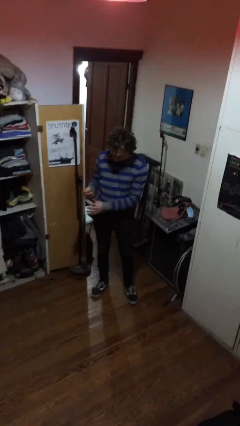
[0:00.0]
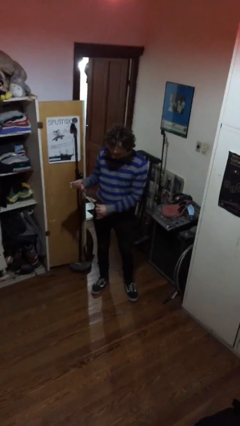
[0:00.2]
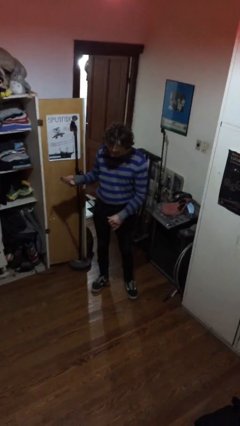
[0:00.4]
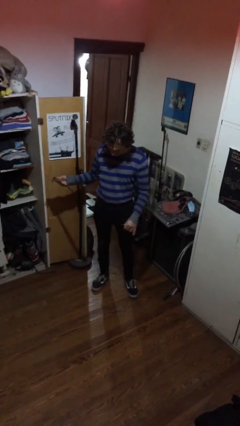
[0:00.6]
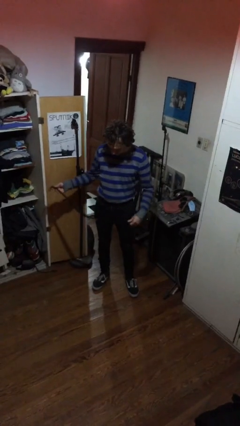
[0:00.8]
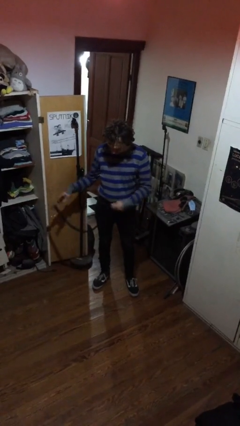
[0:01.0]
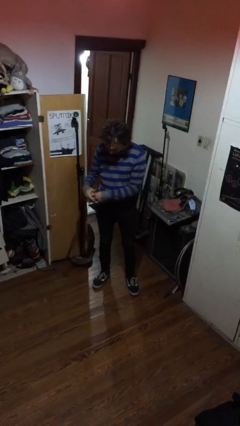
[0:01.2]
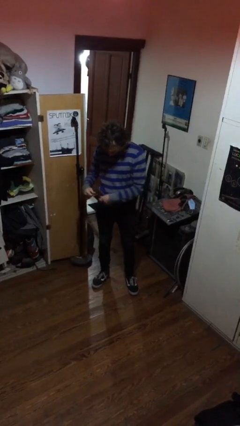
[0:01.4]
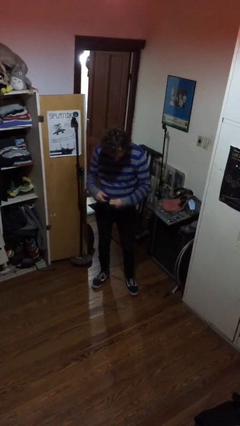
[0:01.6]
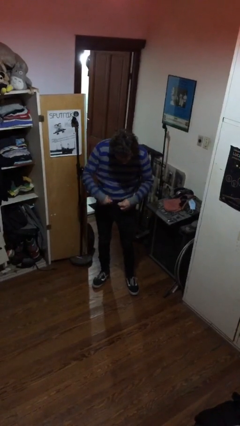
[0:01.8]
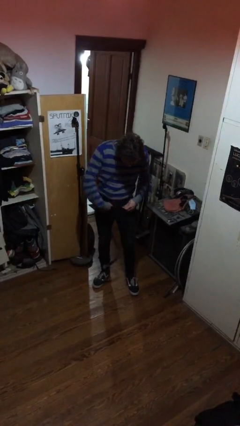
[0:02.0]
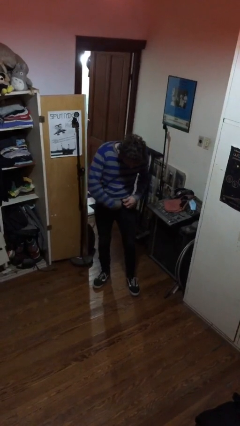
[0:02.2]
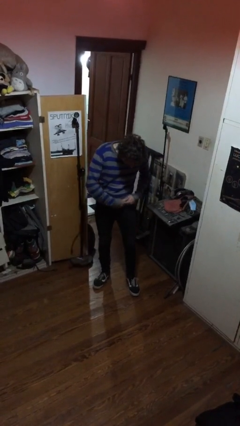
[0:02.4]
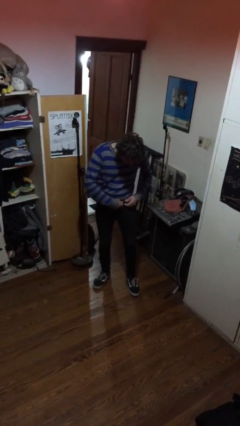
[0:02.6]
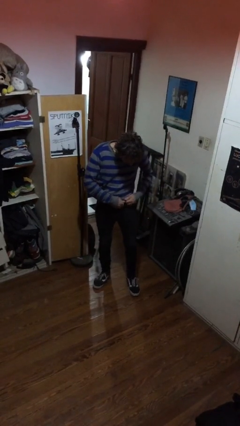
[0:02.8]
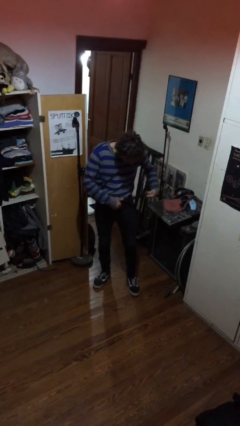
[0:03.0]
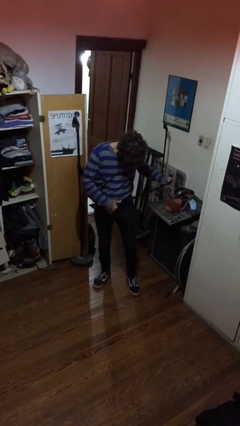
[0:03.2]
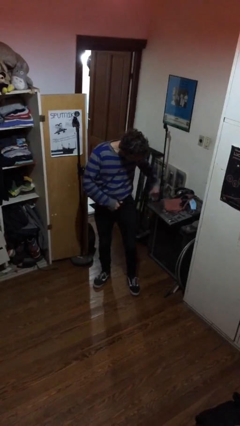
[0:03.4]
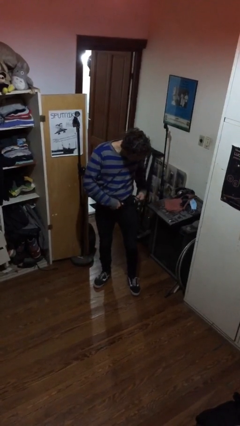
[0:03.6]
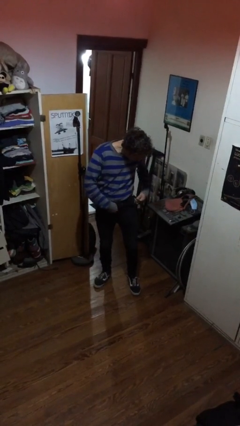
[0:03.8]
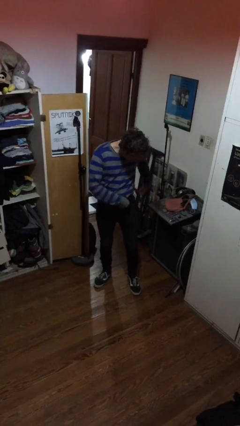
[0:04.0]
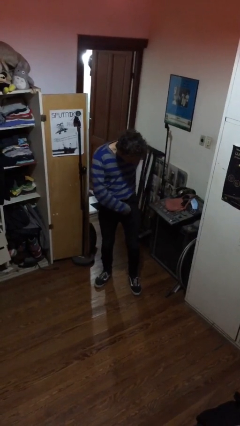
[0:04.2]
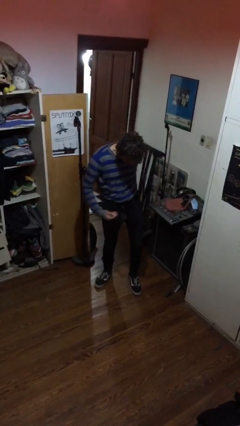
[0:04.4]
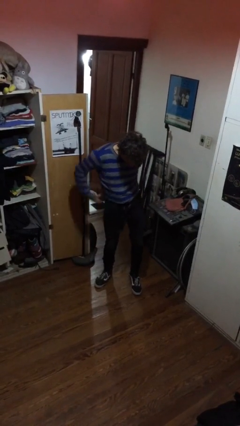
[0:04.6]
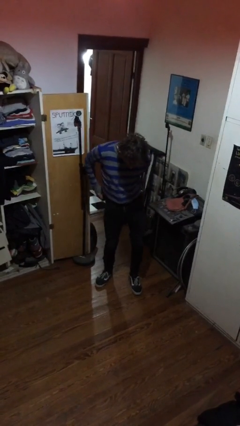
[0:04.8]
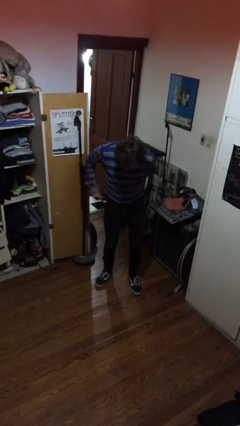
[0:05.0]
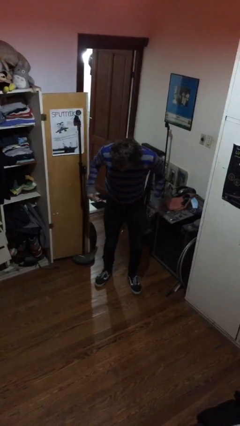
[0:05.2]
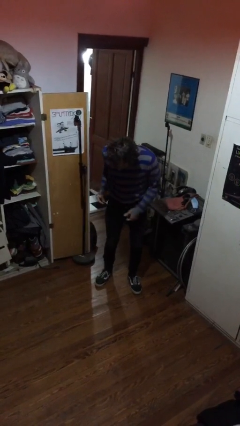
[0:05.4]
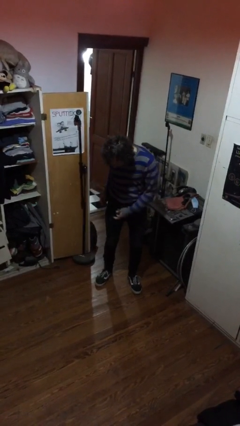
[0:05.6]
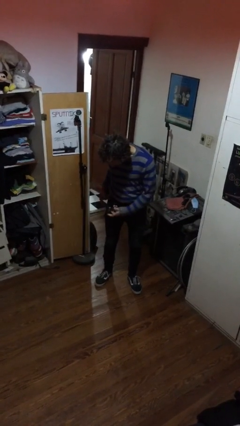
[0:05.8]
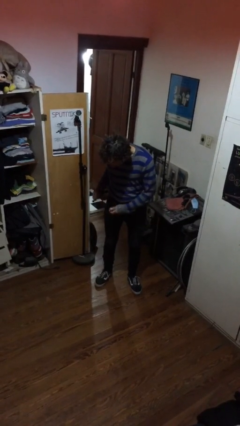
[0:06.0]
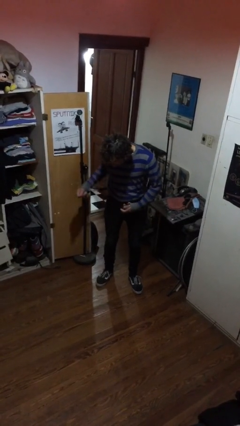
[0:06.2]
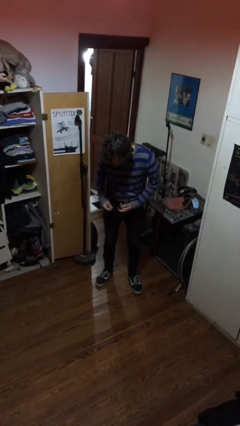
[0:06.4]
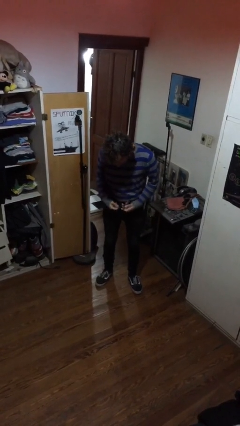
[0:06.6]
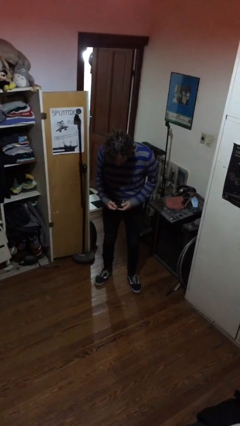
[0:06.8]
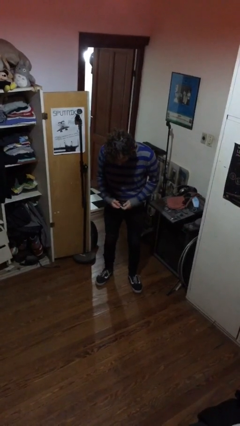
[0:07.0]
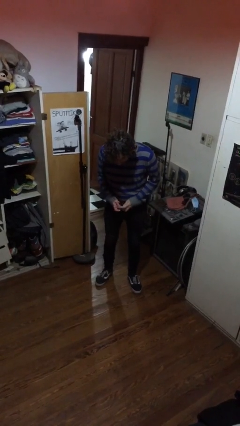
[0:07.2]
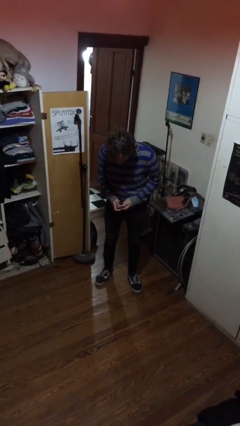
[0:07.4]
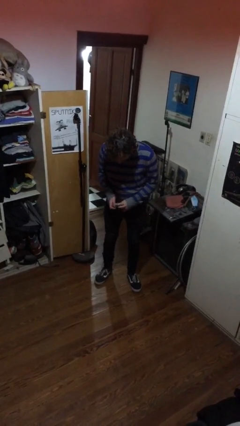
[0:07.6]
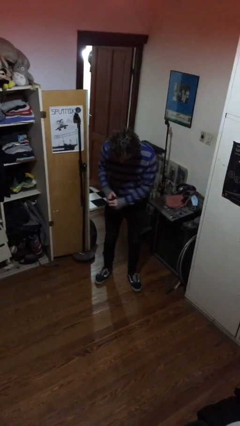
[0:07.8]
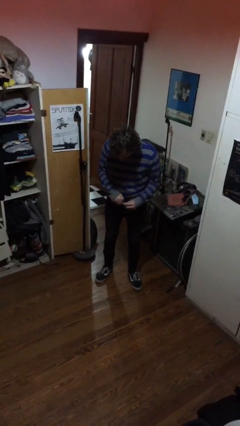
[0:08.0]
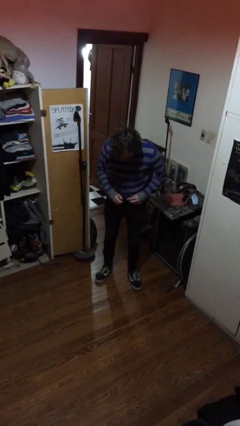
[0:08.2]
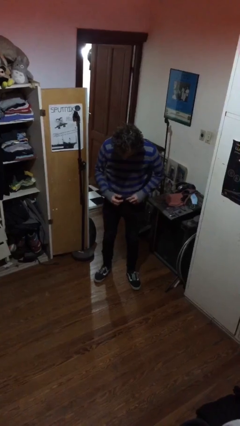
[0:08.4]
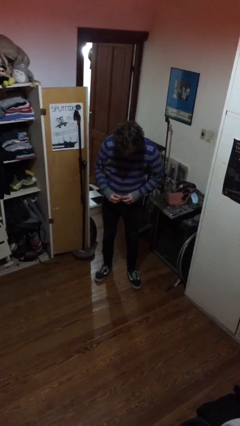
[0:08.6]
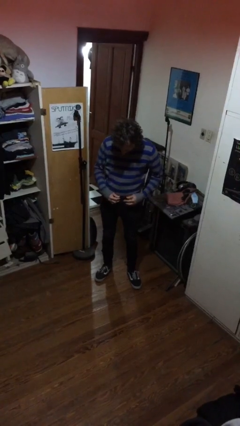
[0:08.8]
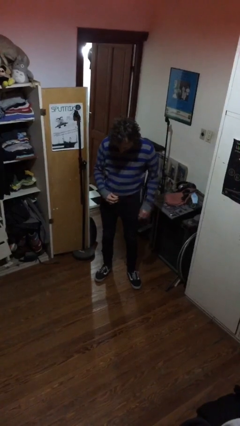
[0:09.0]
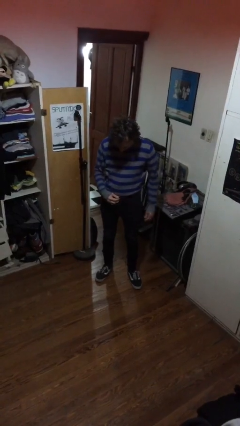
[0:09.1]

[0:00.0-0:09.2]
person puts on belt

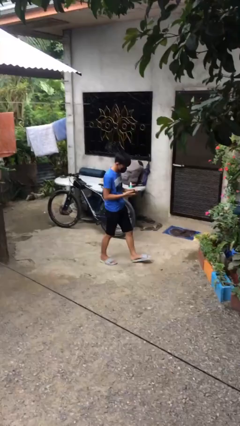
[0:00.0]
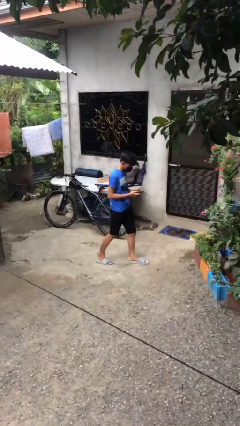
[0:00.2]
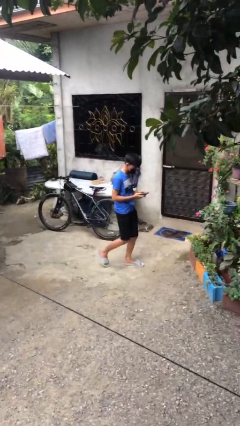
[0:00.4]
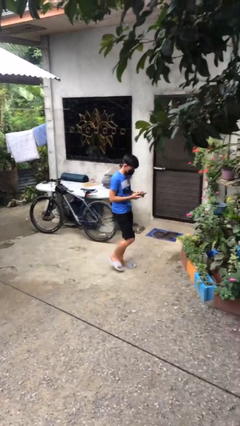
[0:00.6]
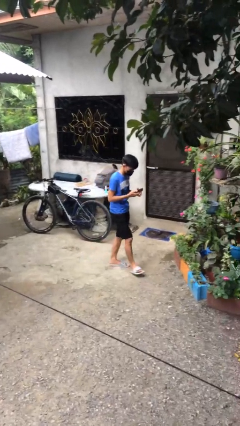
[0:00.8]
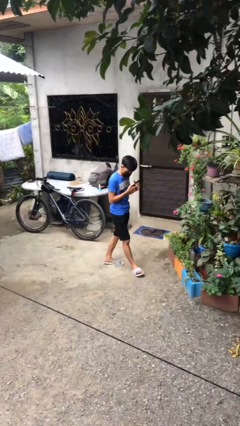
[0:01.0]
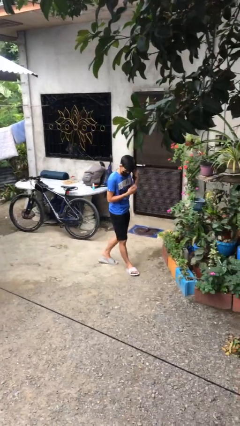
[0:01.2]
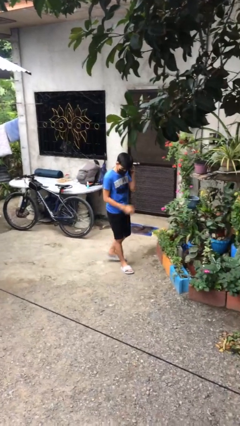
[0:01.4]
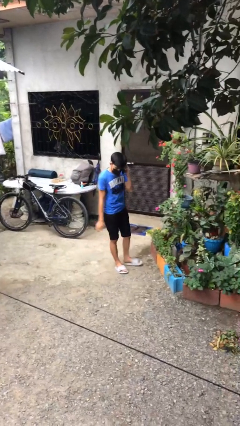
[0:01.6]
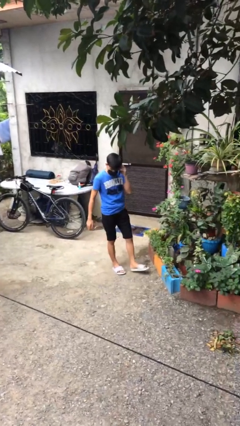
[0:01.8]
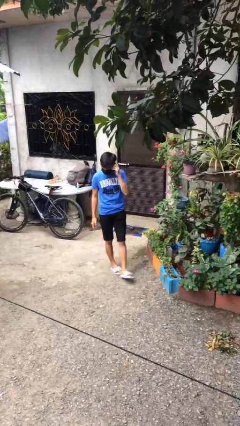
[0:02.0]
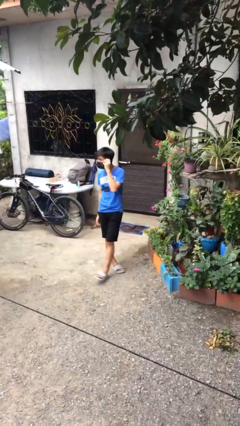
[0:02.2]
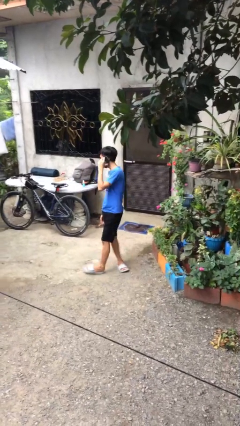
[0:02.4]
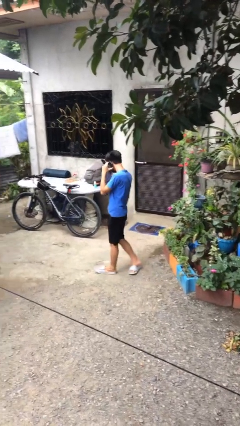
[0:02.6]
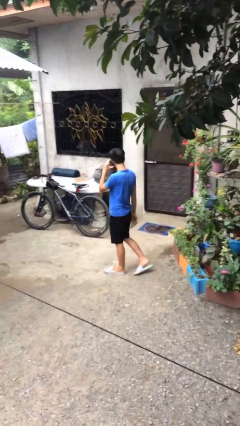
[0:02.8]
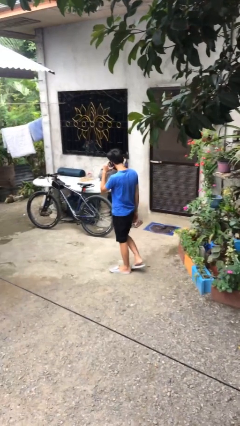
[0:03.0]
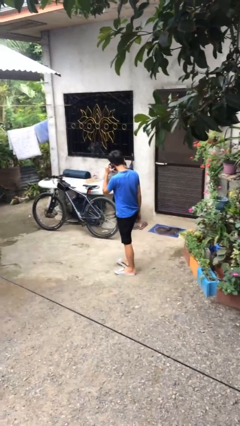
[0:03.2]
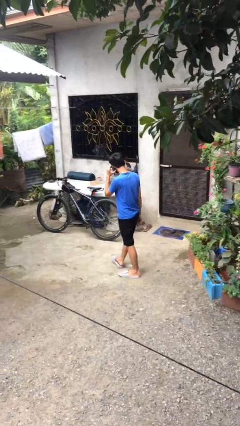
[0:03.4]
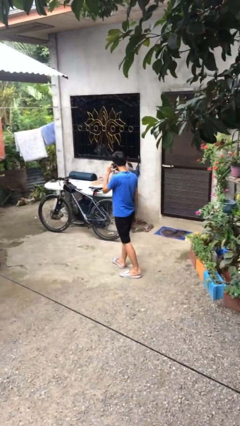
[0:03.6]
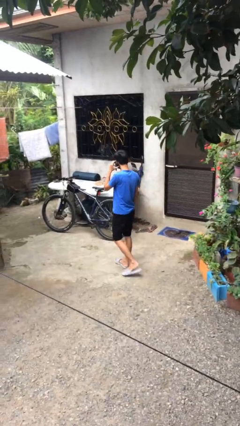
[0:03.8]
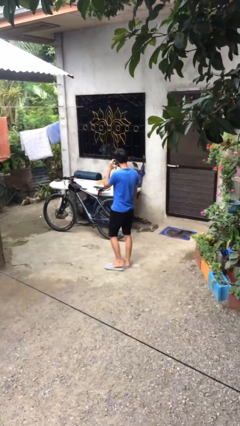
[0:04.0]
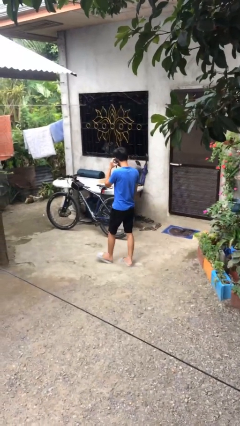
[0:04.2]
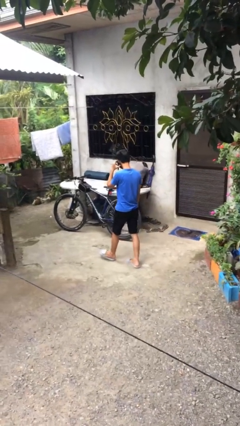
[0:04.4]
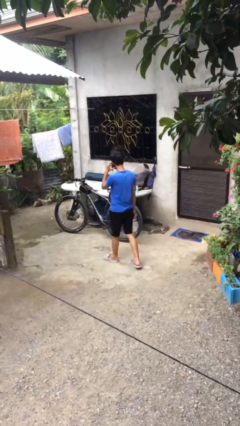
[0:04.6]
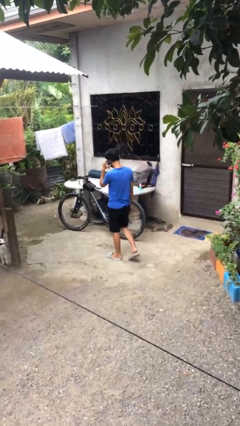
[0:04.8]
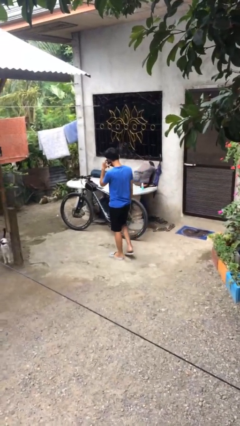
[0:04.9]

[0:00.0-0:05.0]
person talks on phone

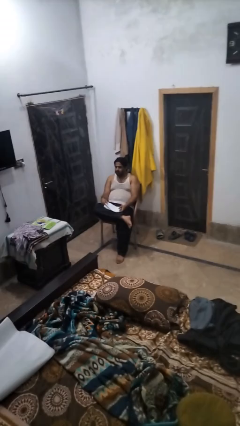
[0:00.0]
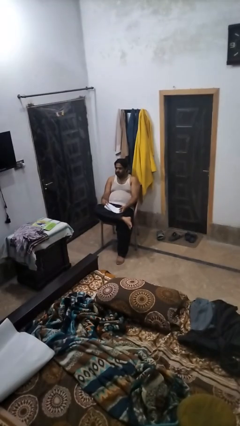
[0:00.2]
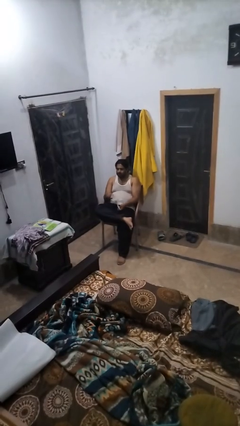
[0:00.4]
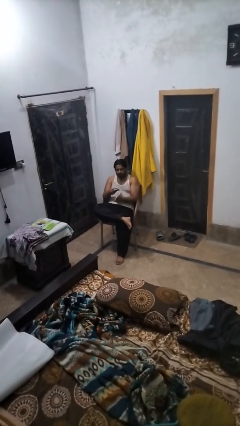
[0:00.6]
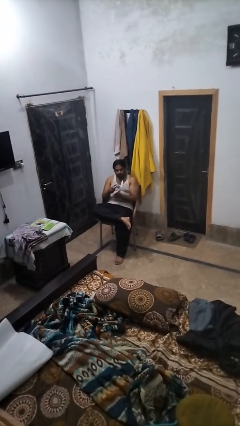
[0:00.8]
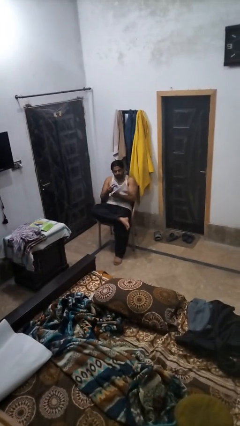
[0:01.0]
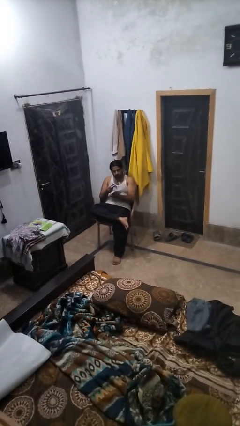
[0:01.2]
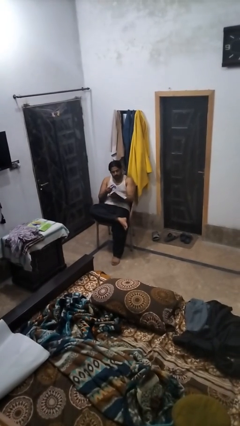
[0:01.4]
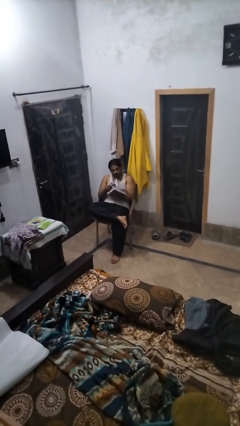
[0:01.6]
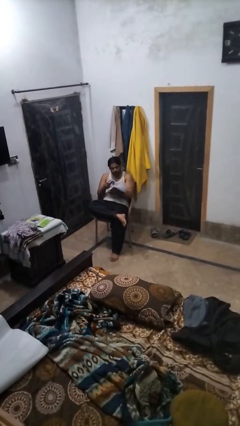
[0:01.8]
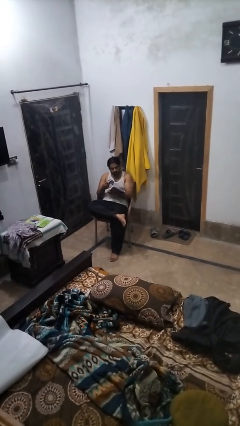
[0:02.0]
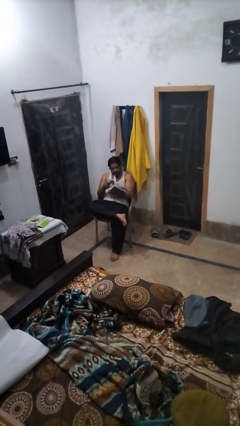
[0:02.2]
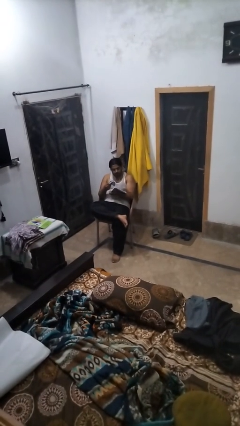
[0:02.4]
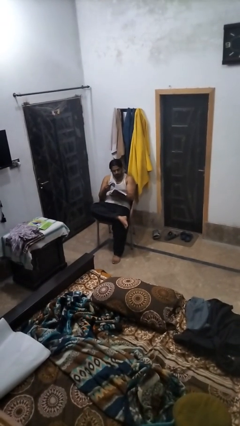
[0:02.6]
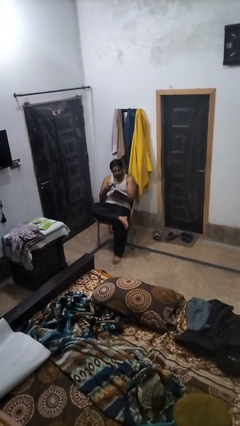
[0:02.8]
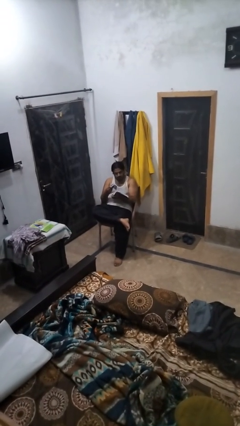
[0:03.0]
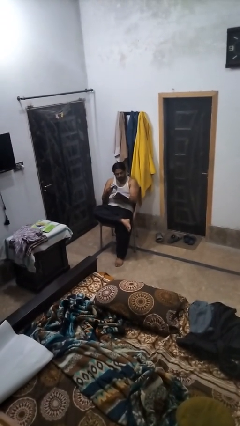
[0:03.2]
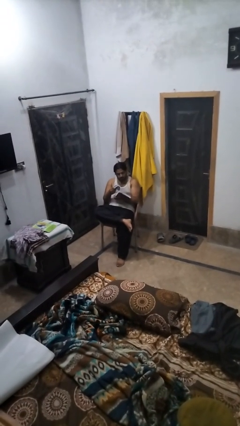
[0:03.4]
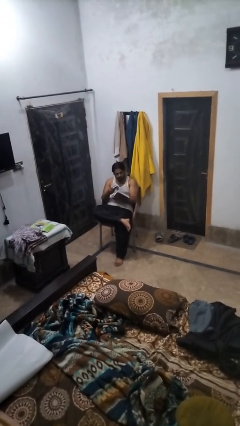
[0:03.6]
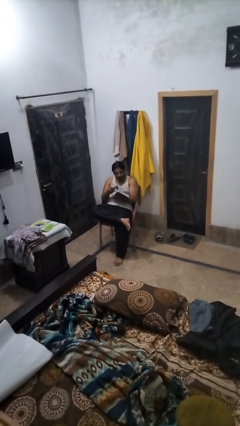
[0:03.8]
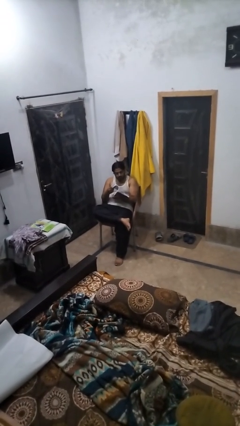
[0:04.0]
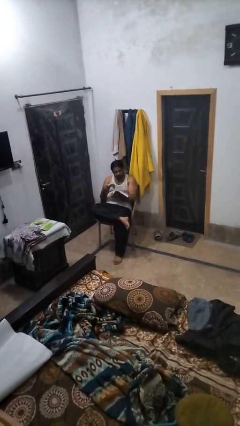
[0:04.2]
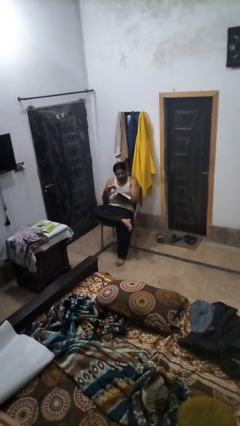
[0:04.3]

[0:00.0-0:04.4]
person reads book
